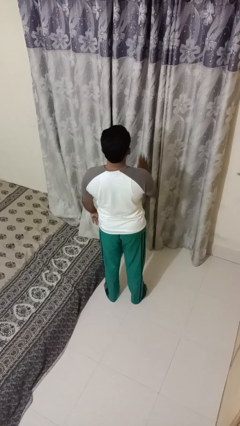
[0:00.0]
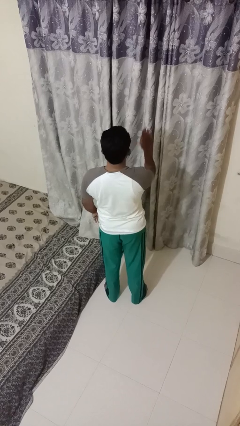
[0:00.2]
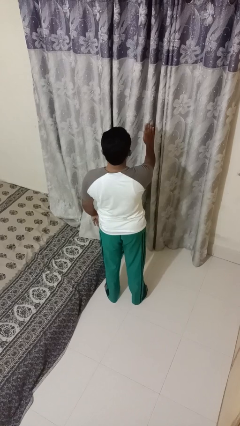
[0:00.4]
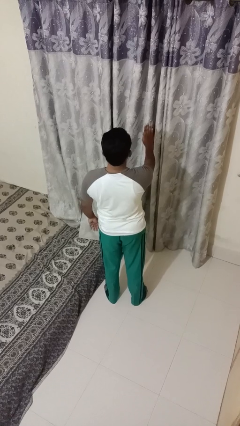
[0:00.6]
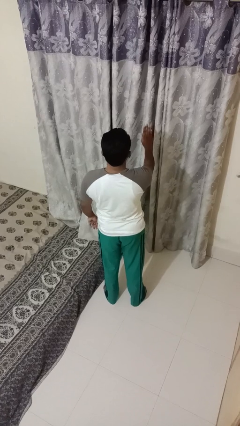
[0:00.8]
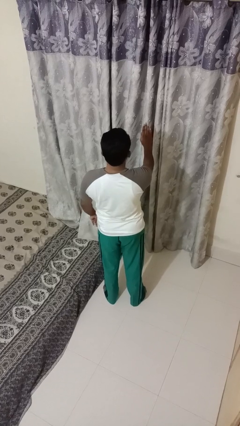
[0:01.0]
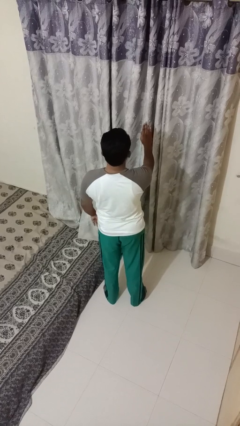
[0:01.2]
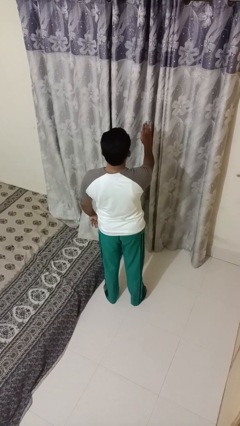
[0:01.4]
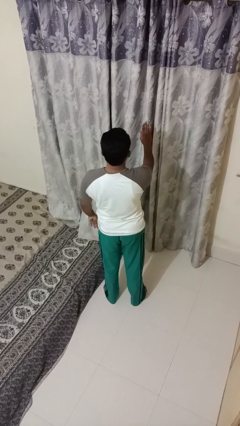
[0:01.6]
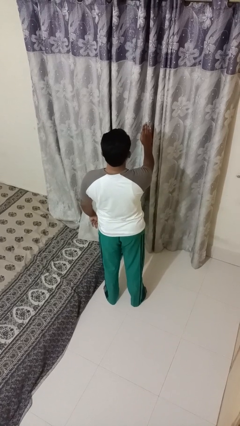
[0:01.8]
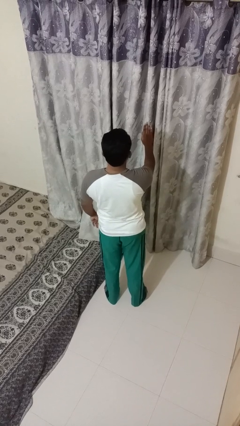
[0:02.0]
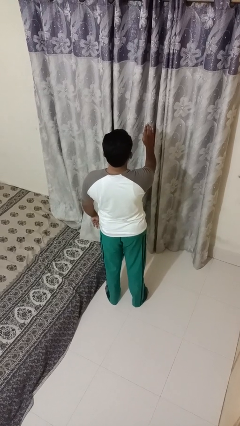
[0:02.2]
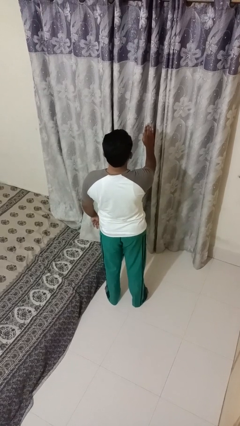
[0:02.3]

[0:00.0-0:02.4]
person gestures stop

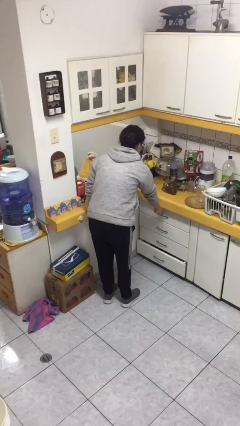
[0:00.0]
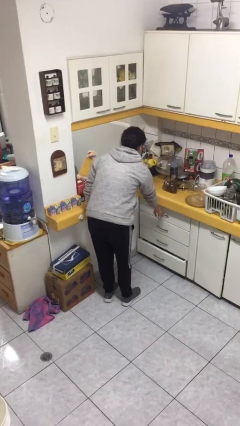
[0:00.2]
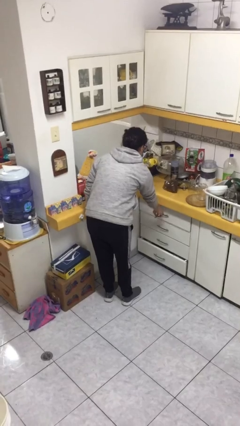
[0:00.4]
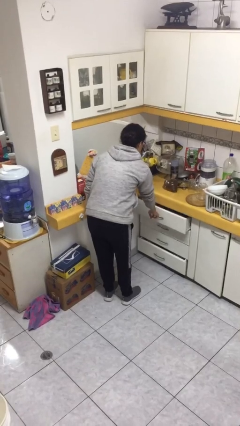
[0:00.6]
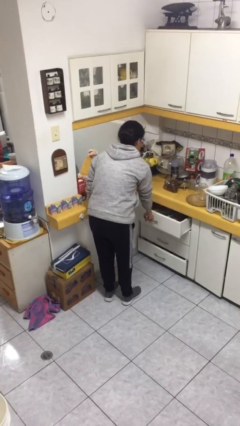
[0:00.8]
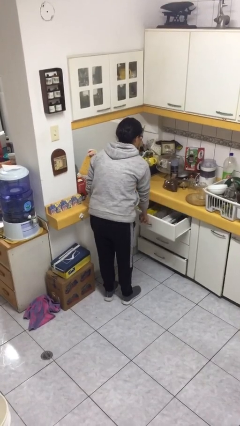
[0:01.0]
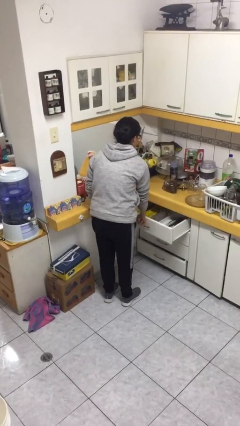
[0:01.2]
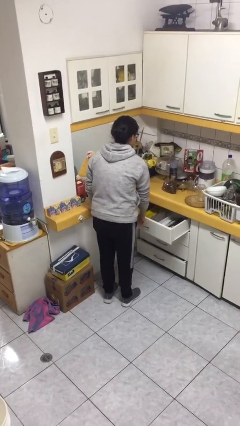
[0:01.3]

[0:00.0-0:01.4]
person opens kitchen drawer

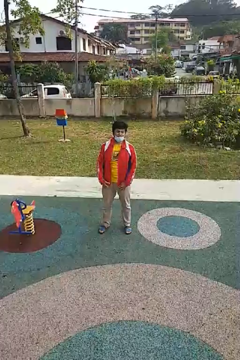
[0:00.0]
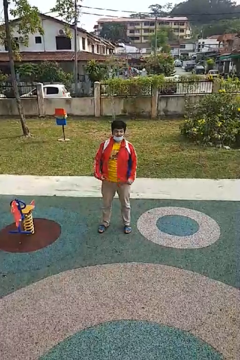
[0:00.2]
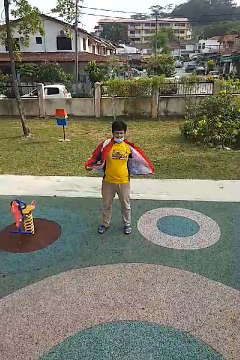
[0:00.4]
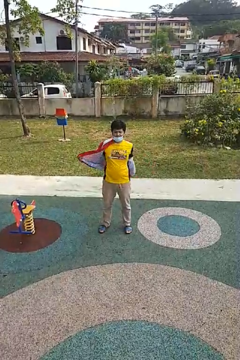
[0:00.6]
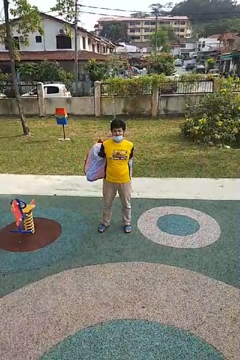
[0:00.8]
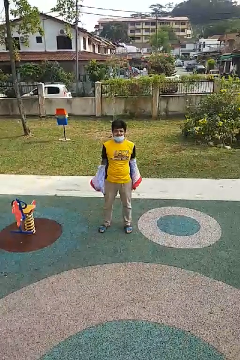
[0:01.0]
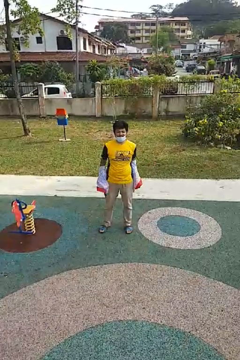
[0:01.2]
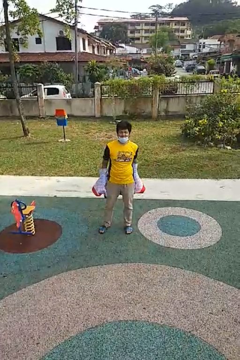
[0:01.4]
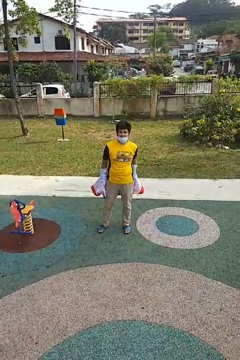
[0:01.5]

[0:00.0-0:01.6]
person takes off jacket

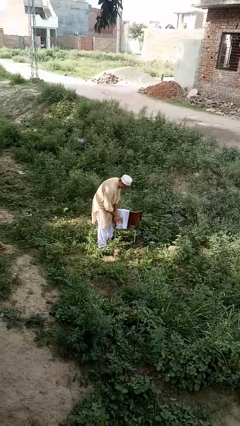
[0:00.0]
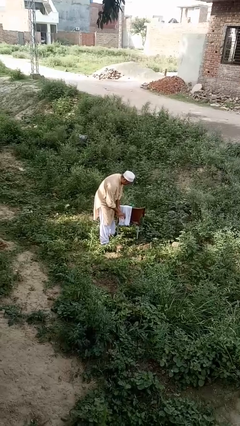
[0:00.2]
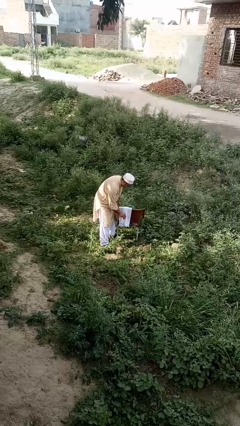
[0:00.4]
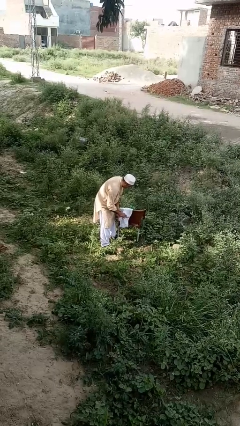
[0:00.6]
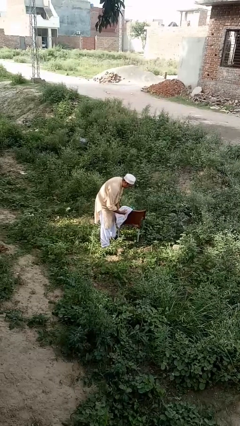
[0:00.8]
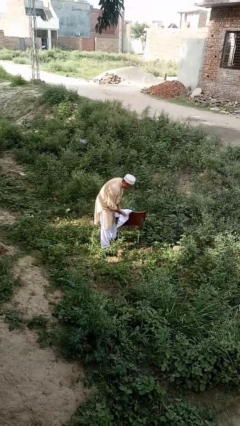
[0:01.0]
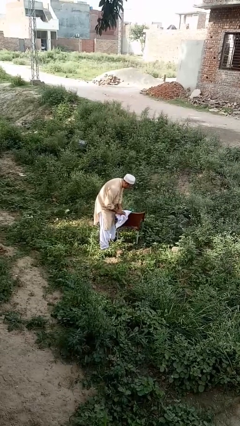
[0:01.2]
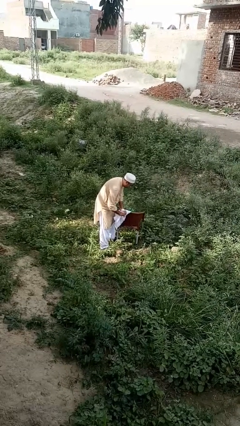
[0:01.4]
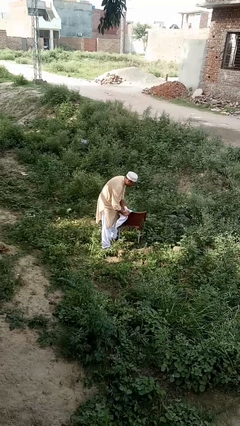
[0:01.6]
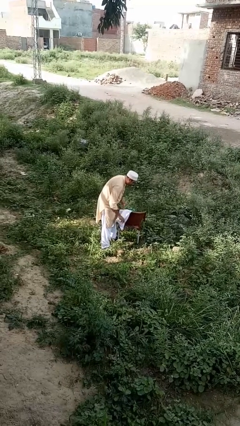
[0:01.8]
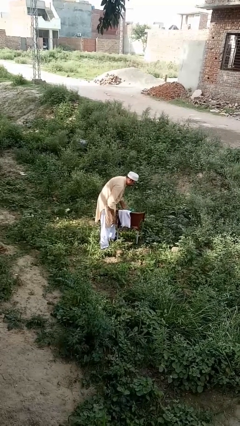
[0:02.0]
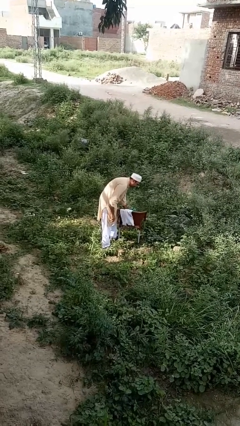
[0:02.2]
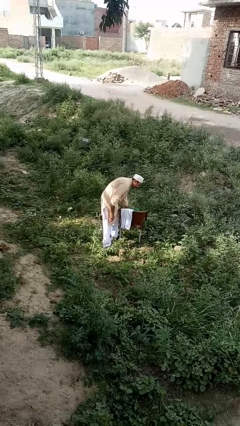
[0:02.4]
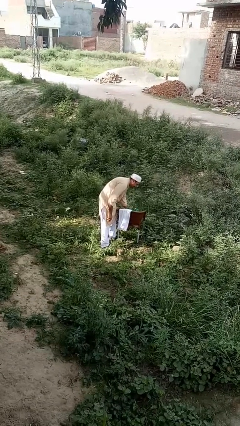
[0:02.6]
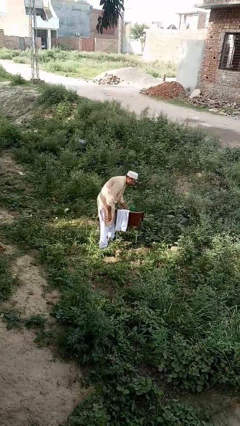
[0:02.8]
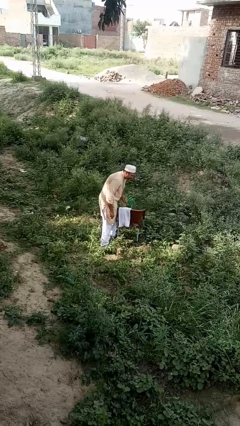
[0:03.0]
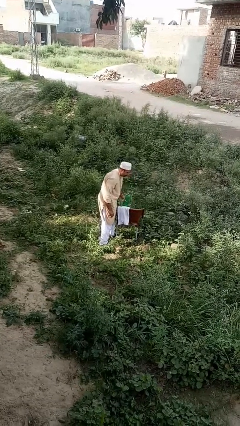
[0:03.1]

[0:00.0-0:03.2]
person dries hands with towel

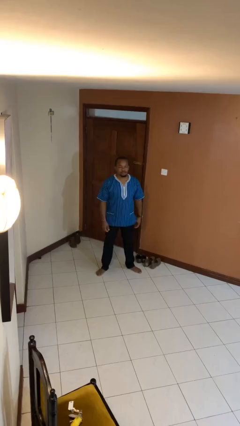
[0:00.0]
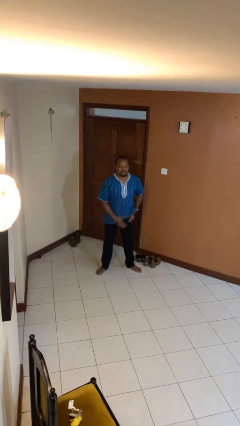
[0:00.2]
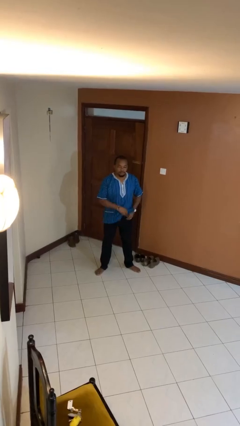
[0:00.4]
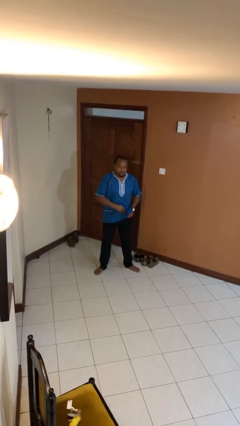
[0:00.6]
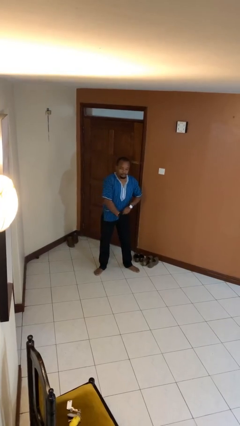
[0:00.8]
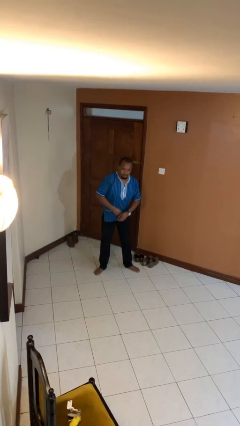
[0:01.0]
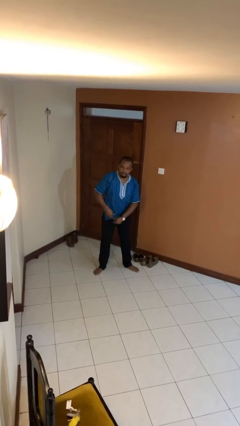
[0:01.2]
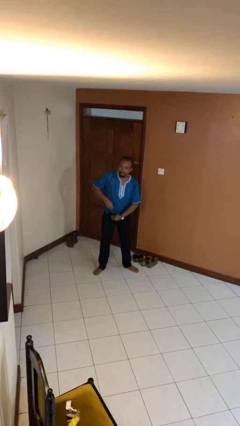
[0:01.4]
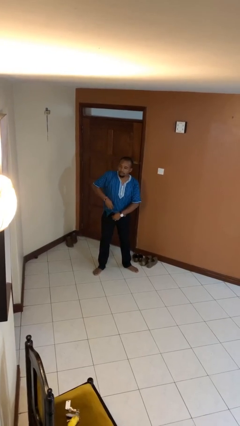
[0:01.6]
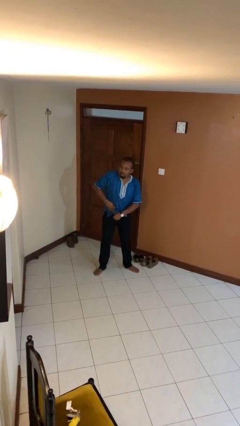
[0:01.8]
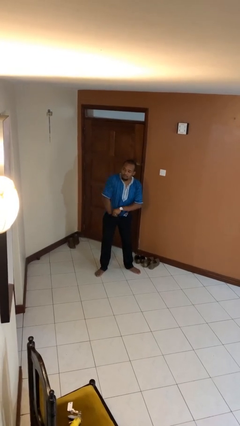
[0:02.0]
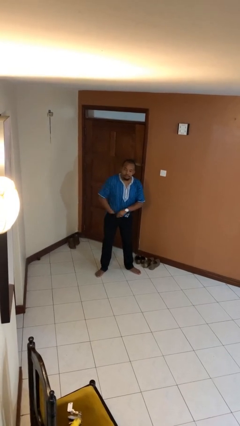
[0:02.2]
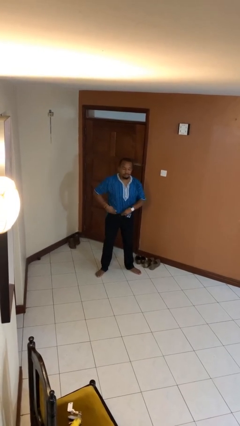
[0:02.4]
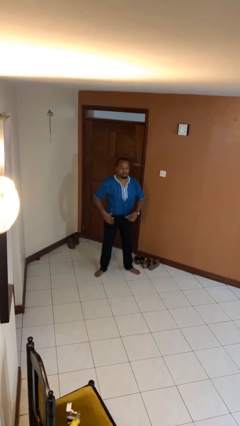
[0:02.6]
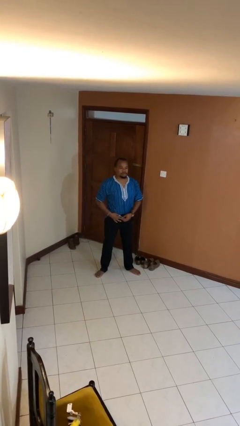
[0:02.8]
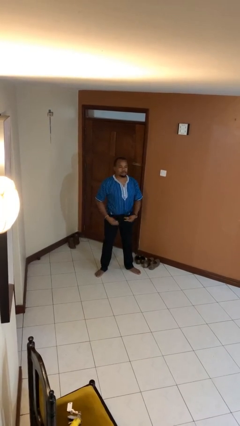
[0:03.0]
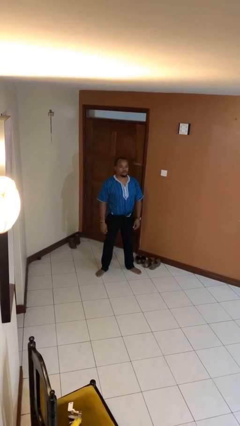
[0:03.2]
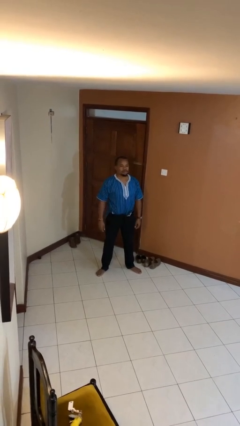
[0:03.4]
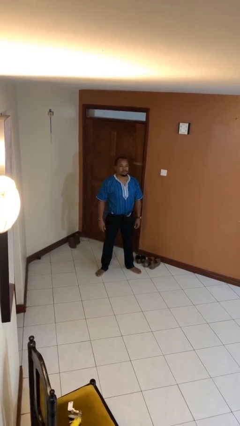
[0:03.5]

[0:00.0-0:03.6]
person tucks in shirt

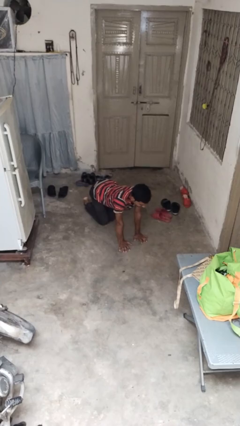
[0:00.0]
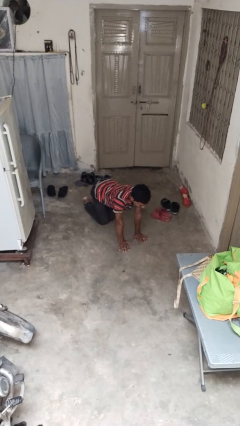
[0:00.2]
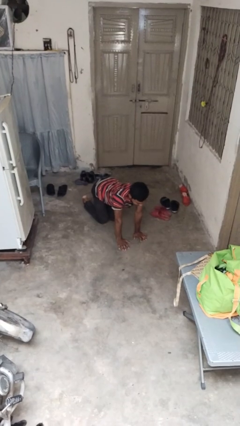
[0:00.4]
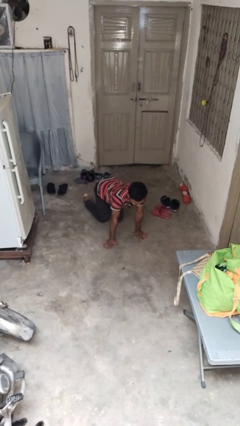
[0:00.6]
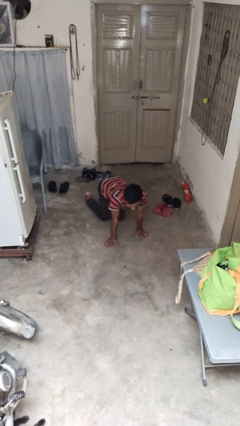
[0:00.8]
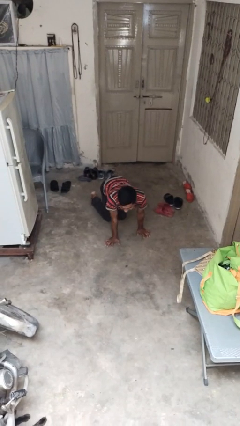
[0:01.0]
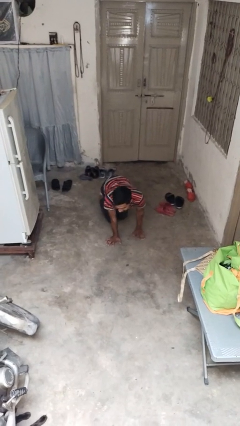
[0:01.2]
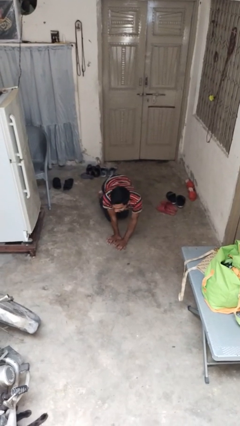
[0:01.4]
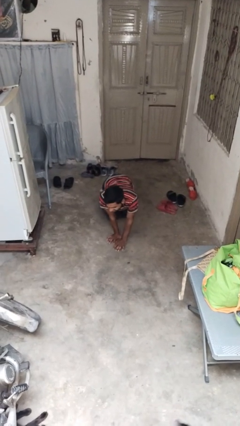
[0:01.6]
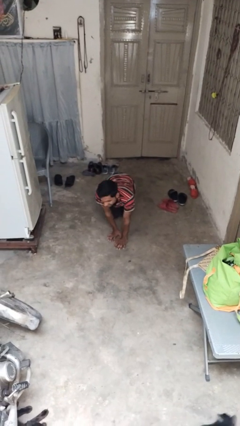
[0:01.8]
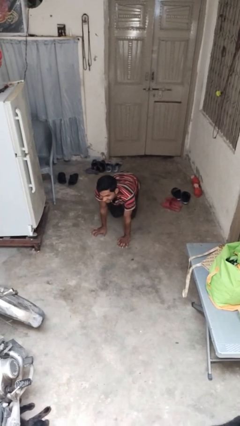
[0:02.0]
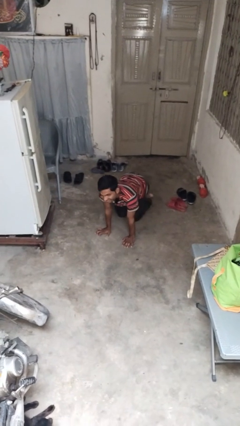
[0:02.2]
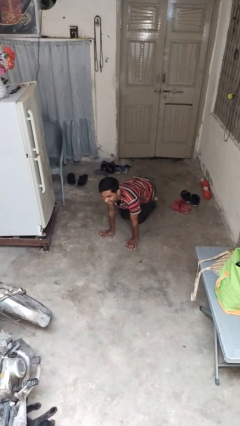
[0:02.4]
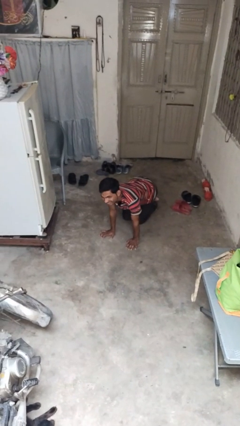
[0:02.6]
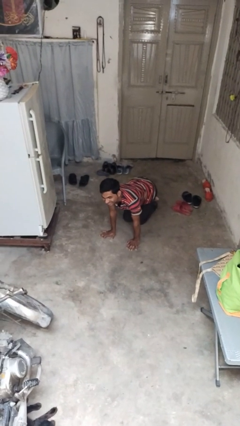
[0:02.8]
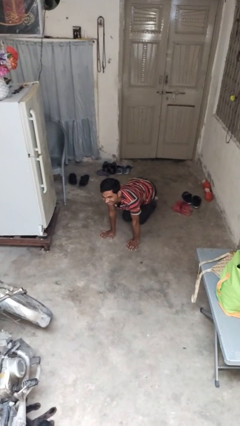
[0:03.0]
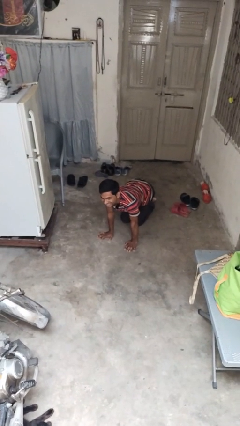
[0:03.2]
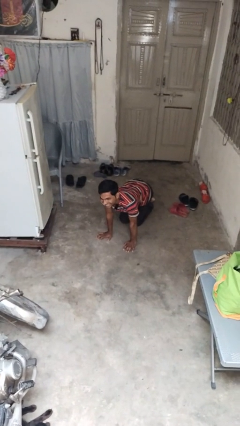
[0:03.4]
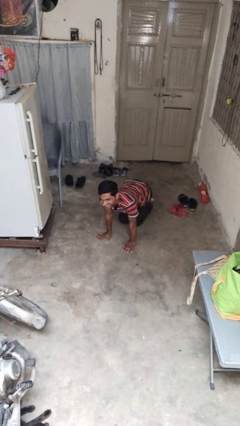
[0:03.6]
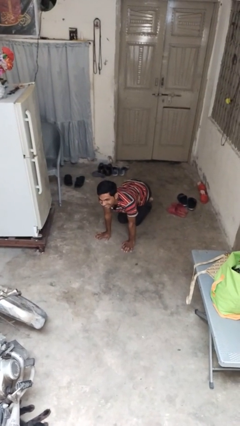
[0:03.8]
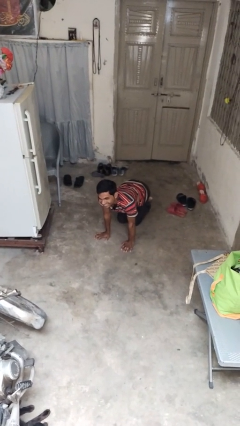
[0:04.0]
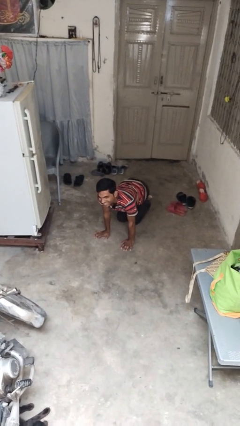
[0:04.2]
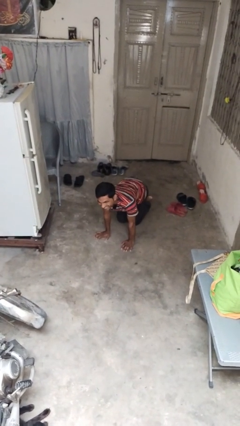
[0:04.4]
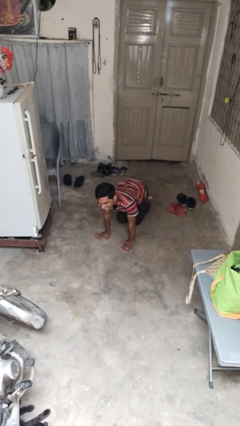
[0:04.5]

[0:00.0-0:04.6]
person crawls

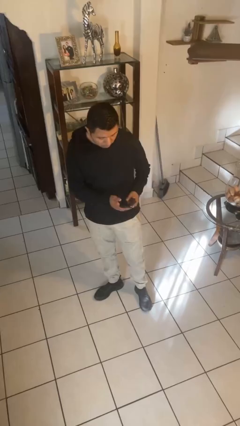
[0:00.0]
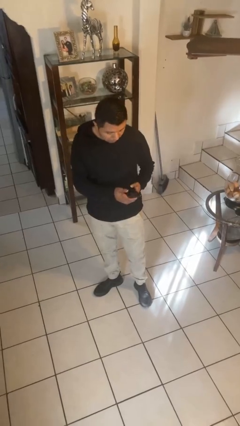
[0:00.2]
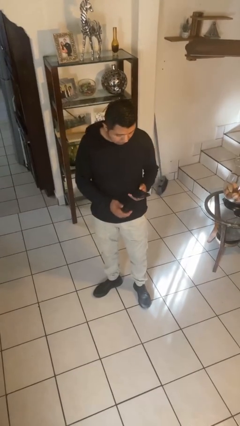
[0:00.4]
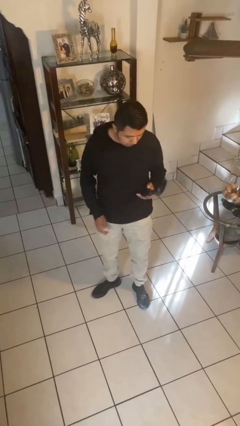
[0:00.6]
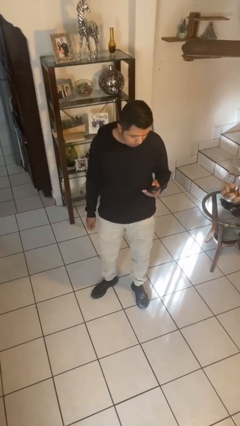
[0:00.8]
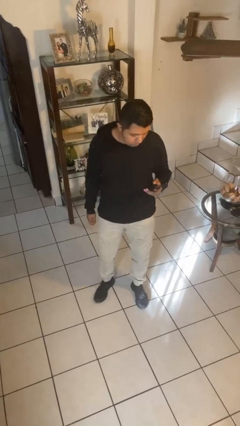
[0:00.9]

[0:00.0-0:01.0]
person takes phone from pocket
